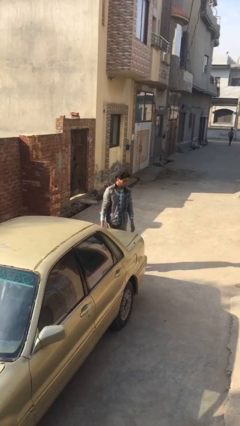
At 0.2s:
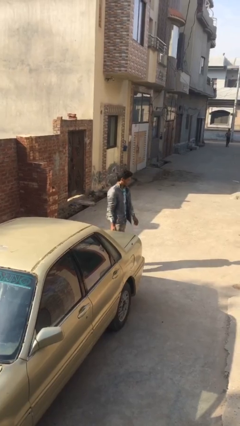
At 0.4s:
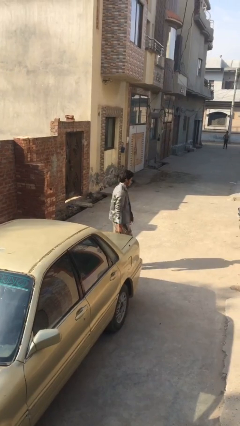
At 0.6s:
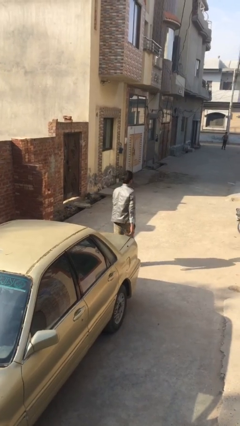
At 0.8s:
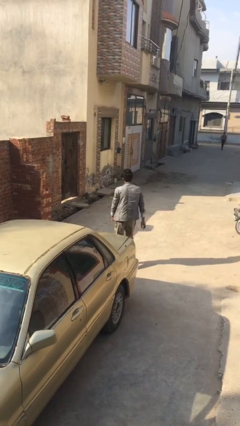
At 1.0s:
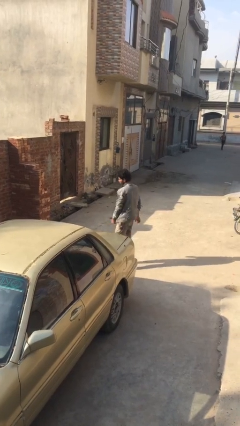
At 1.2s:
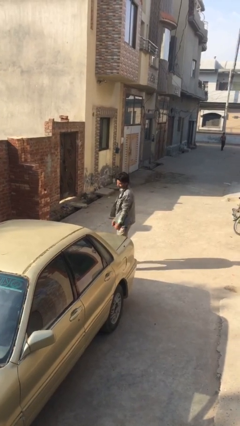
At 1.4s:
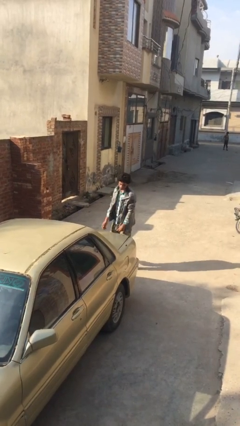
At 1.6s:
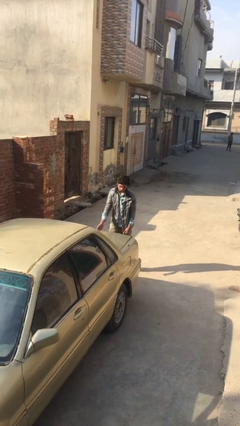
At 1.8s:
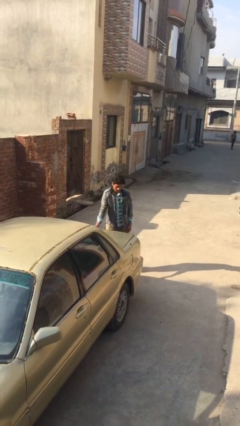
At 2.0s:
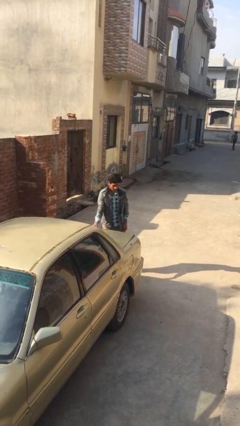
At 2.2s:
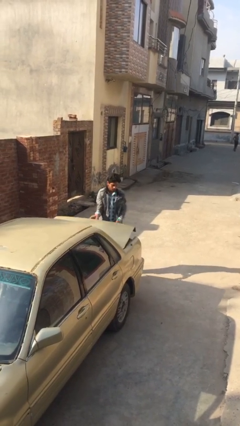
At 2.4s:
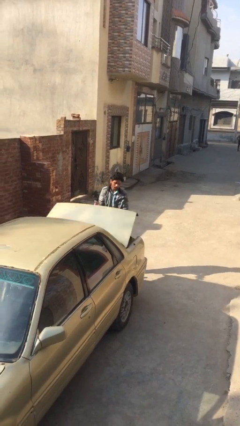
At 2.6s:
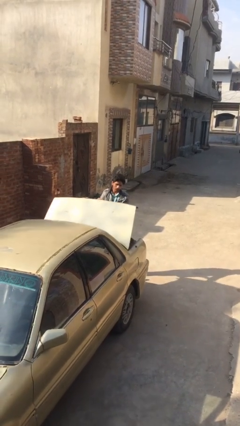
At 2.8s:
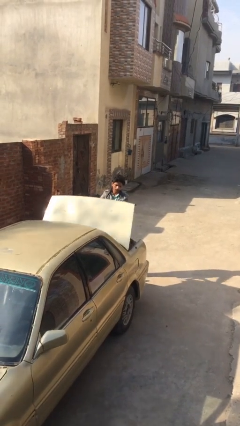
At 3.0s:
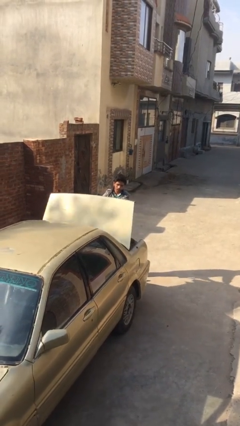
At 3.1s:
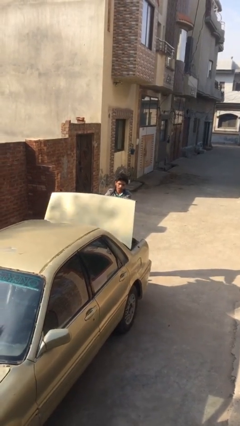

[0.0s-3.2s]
person opens car trunk

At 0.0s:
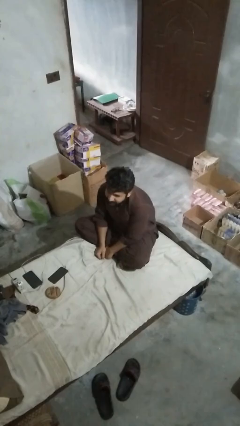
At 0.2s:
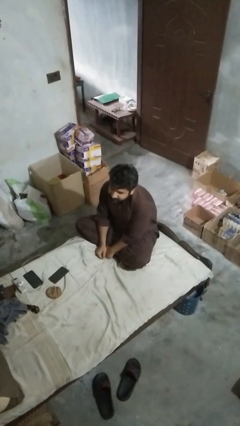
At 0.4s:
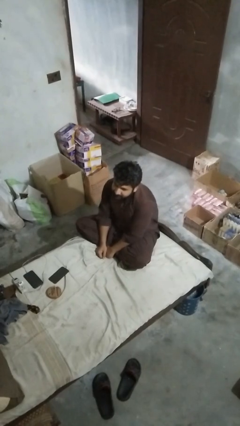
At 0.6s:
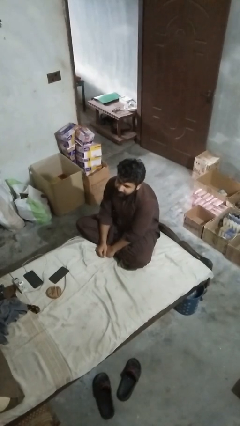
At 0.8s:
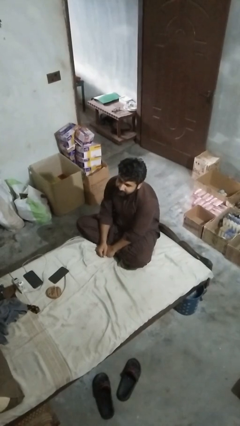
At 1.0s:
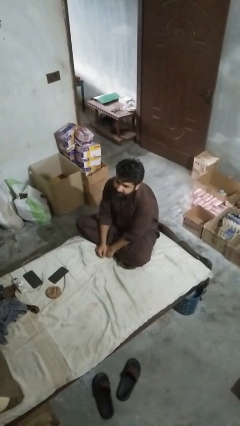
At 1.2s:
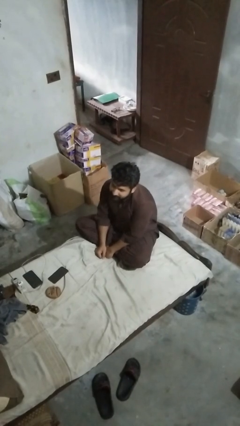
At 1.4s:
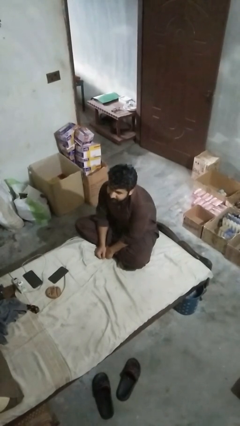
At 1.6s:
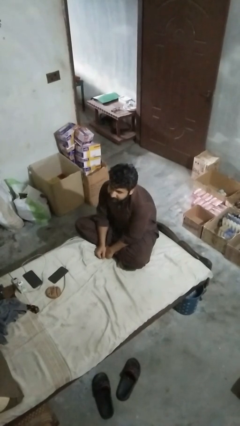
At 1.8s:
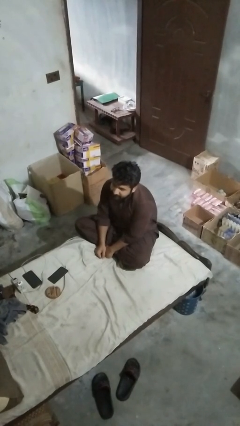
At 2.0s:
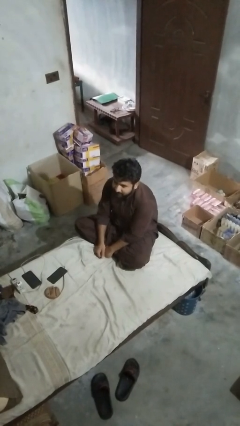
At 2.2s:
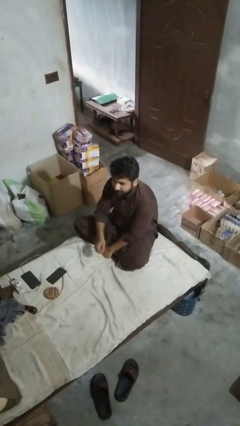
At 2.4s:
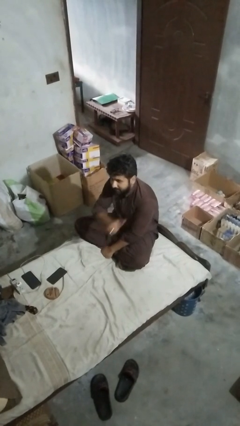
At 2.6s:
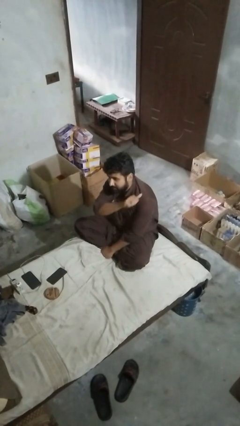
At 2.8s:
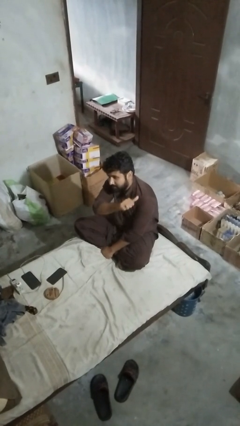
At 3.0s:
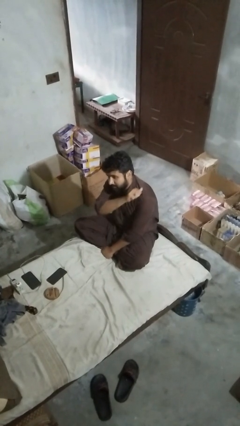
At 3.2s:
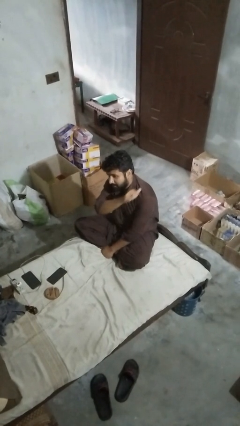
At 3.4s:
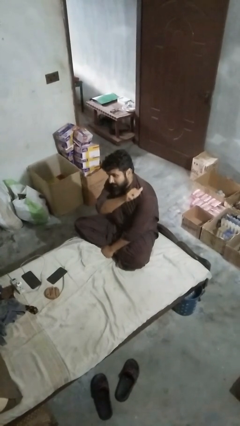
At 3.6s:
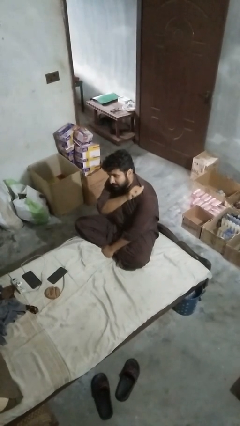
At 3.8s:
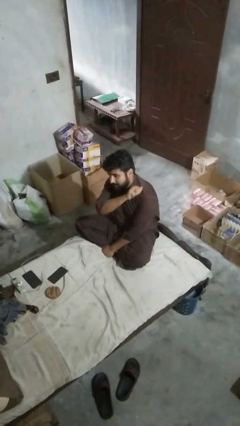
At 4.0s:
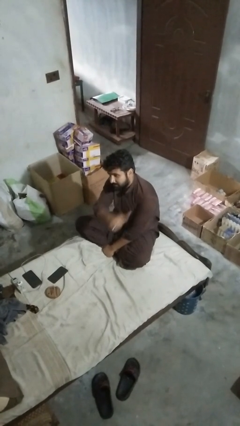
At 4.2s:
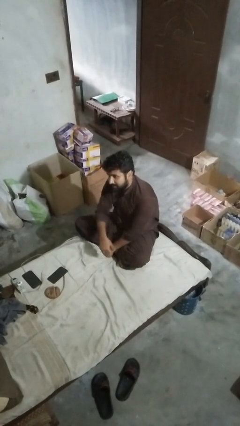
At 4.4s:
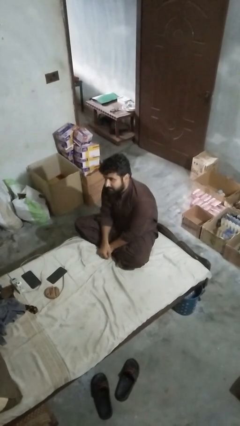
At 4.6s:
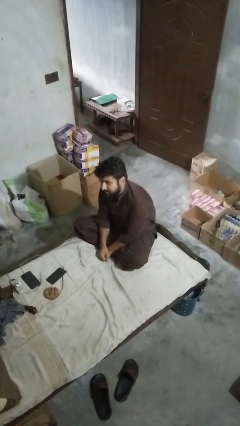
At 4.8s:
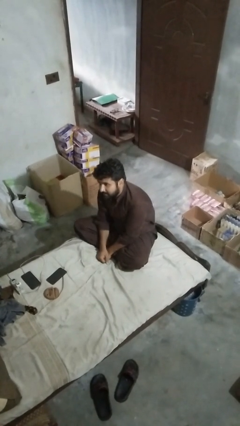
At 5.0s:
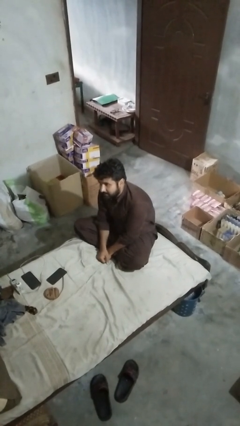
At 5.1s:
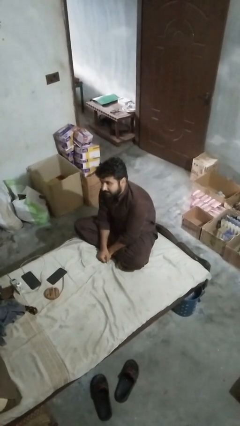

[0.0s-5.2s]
person gestures behind me

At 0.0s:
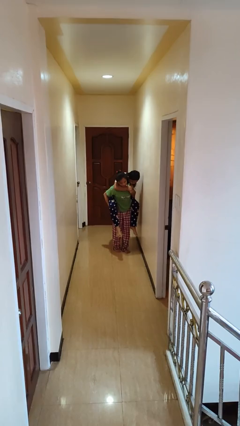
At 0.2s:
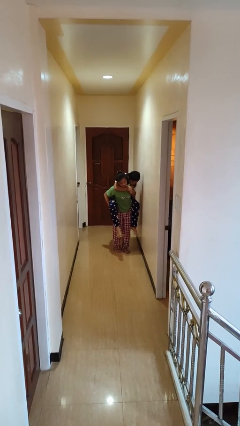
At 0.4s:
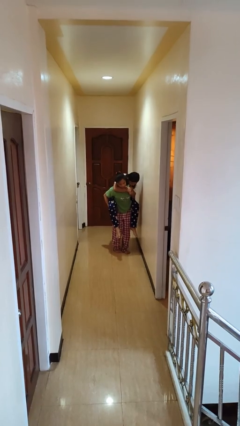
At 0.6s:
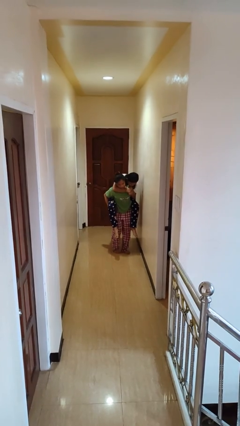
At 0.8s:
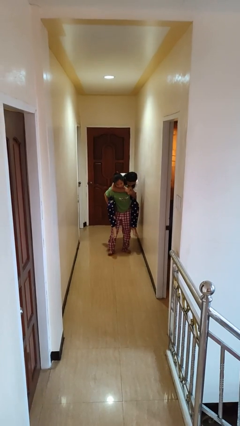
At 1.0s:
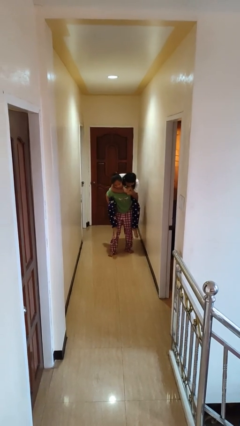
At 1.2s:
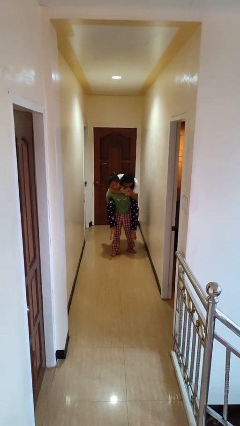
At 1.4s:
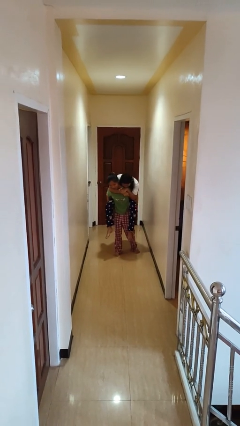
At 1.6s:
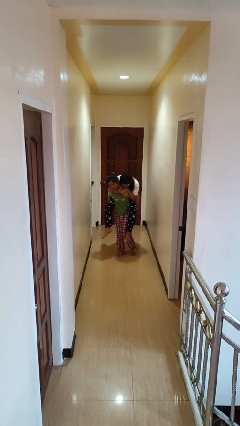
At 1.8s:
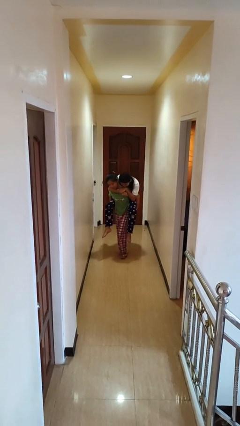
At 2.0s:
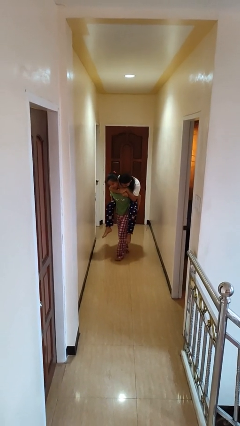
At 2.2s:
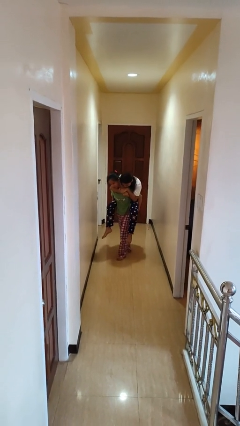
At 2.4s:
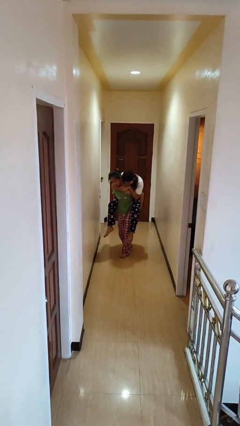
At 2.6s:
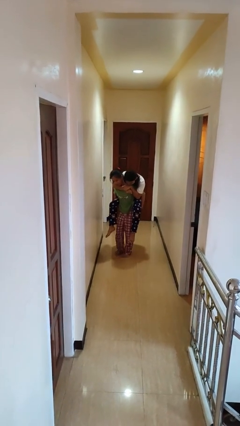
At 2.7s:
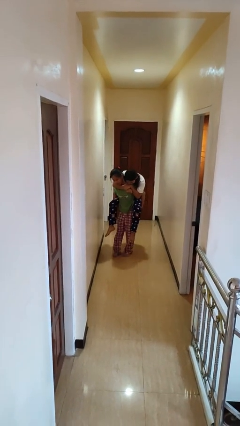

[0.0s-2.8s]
person carries person on back

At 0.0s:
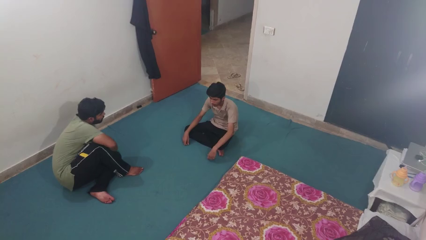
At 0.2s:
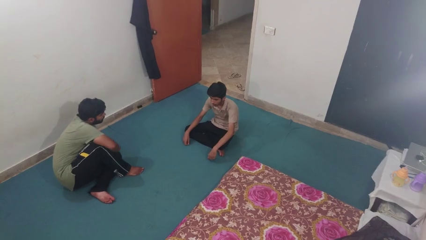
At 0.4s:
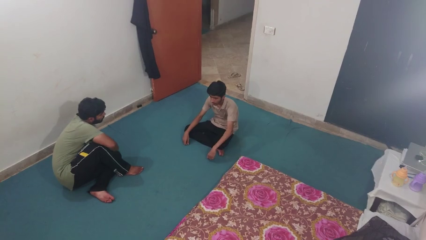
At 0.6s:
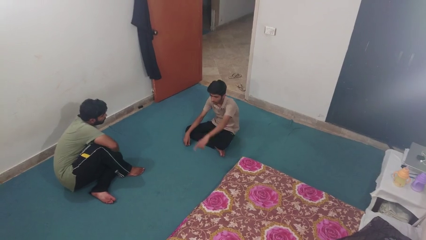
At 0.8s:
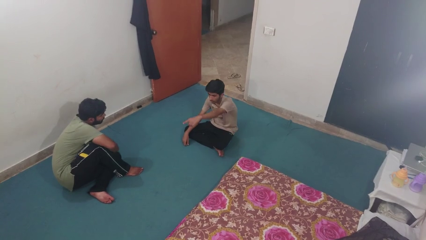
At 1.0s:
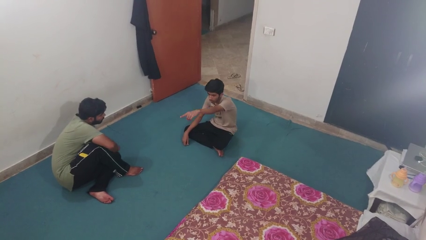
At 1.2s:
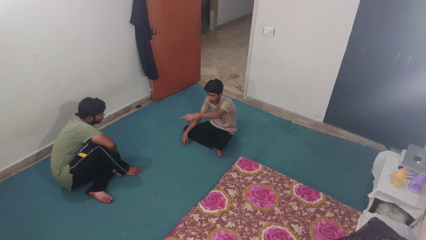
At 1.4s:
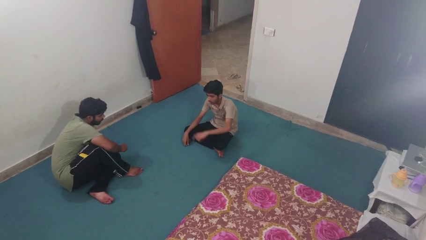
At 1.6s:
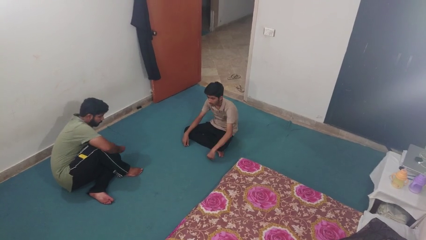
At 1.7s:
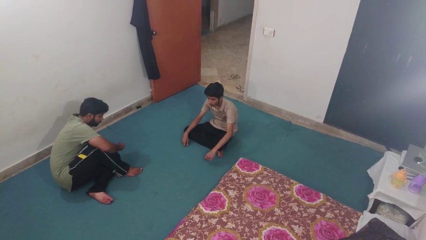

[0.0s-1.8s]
person points at person

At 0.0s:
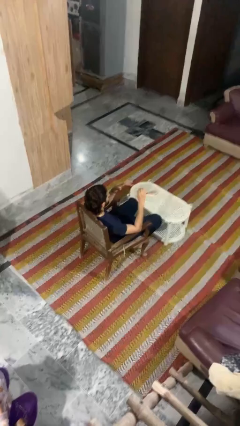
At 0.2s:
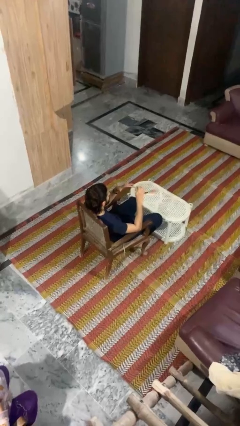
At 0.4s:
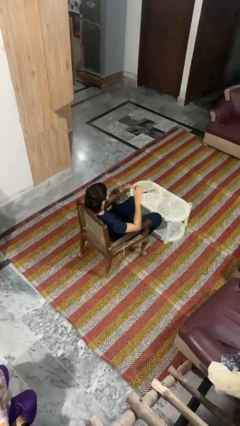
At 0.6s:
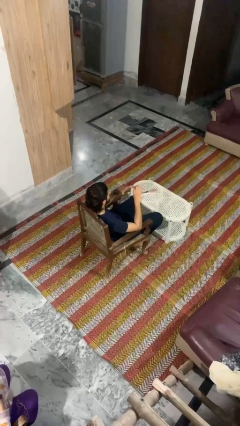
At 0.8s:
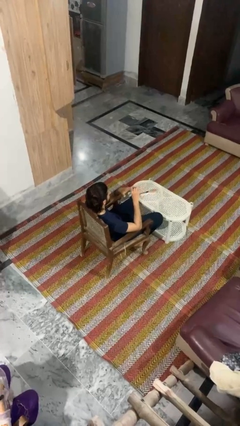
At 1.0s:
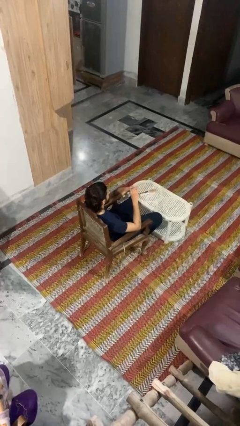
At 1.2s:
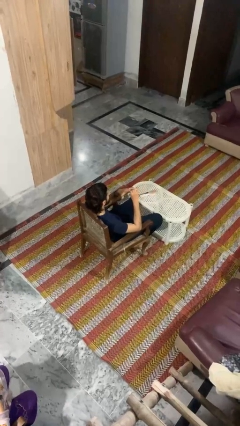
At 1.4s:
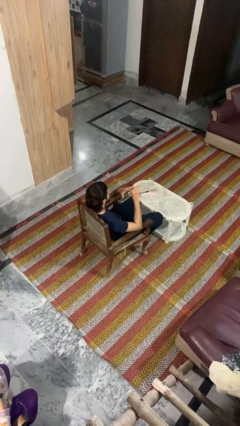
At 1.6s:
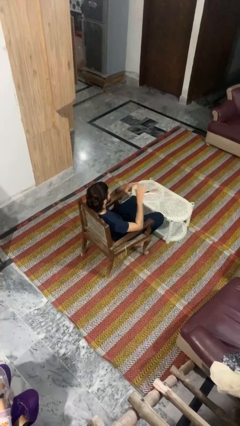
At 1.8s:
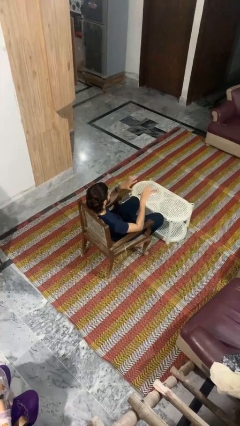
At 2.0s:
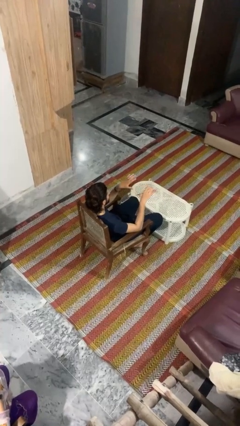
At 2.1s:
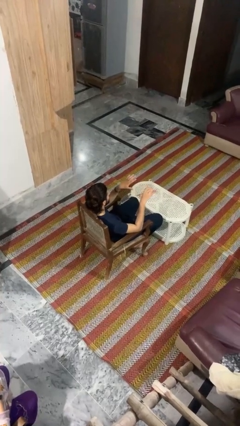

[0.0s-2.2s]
person puts on ring

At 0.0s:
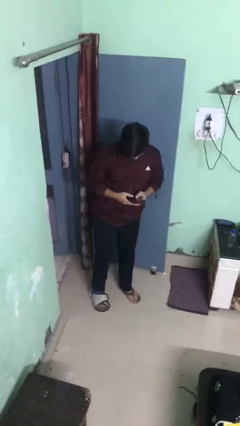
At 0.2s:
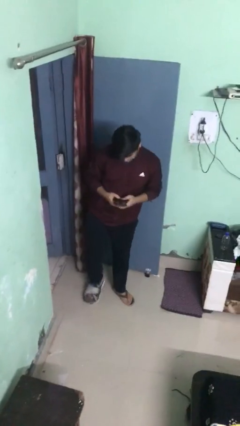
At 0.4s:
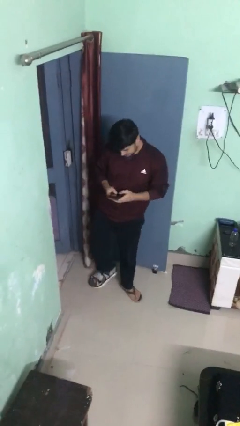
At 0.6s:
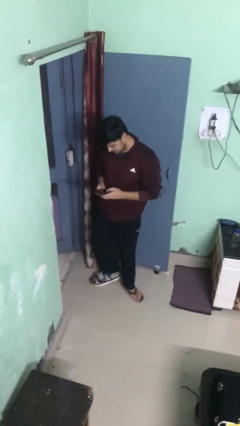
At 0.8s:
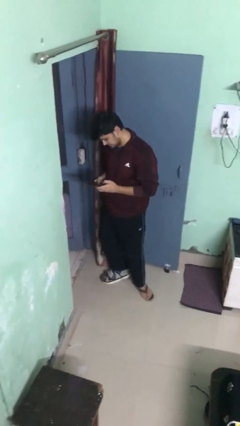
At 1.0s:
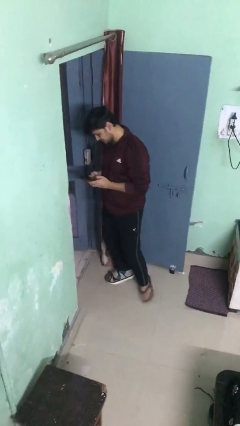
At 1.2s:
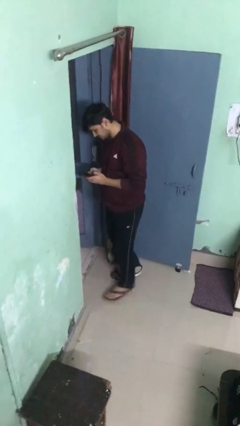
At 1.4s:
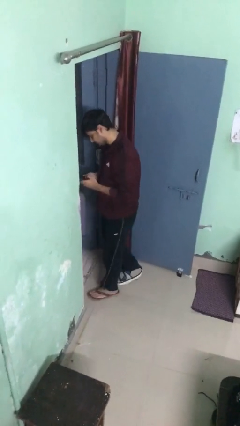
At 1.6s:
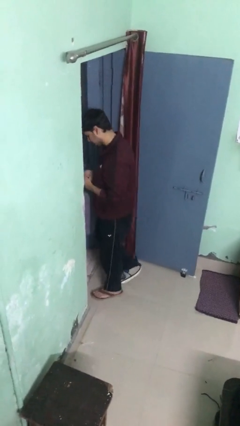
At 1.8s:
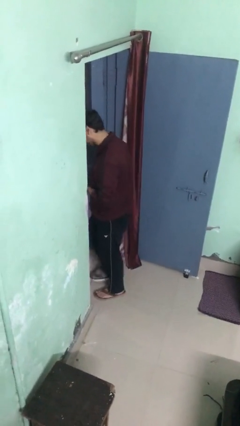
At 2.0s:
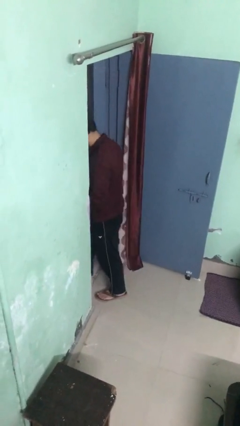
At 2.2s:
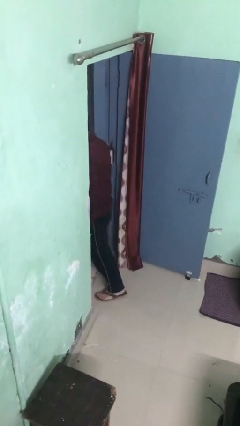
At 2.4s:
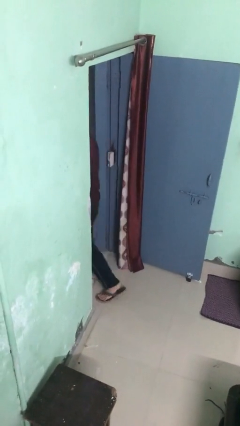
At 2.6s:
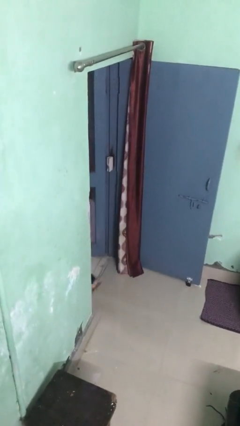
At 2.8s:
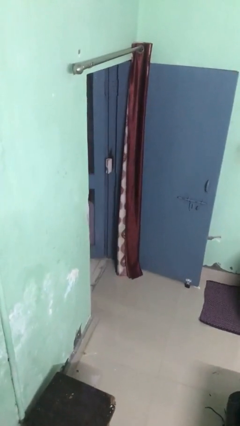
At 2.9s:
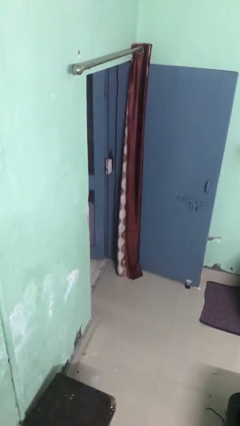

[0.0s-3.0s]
person exits scene through structure
